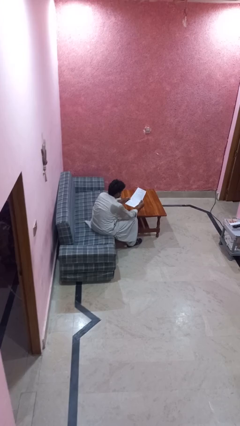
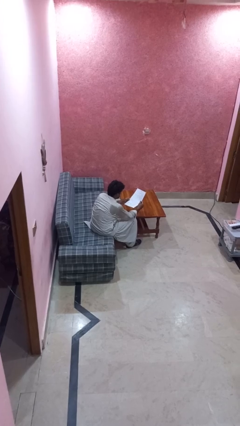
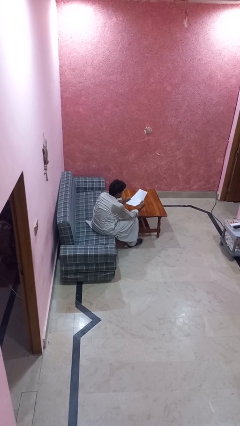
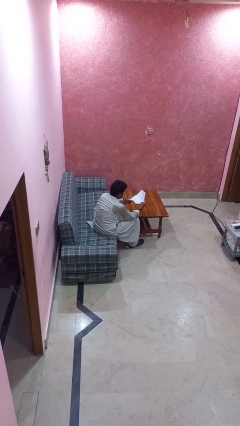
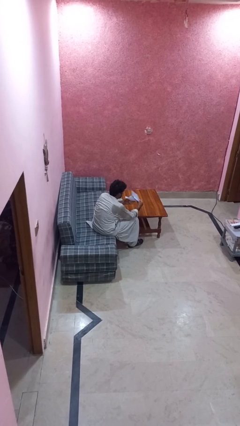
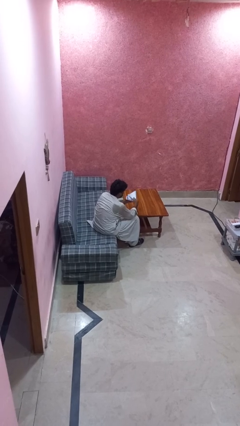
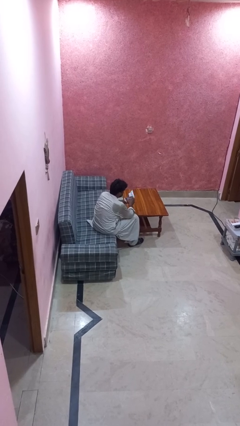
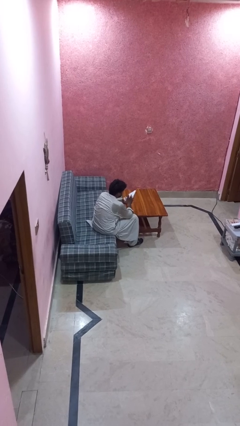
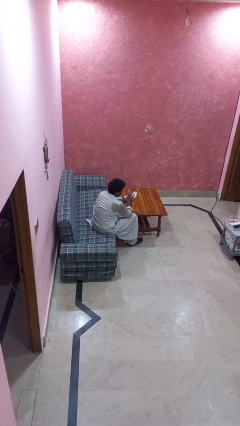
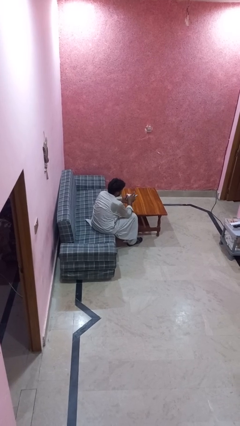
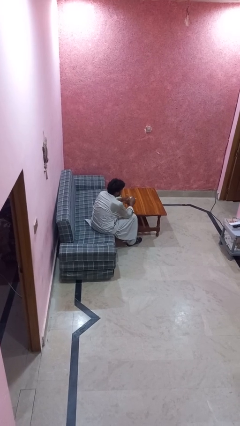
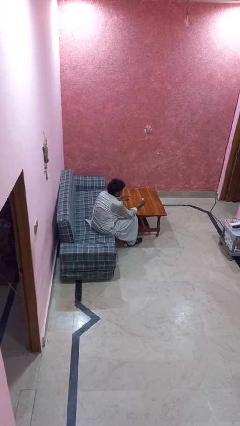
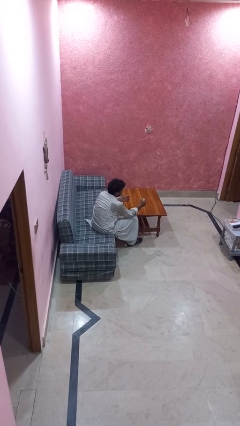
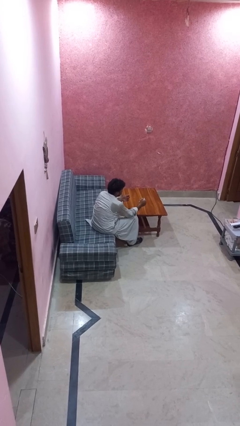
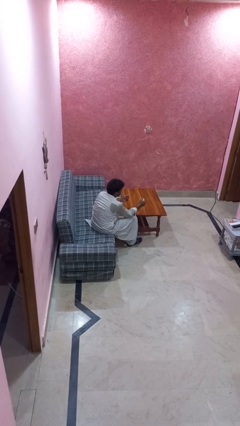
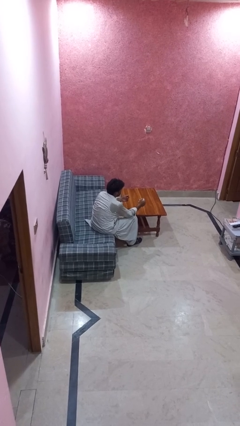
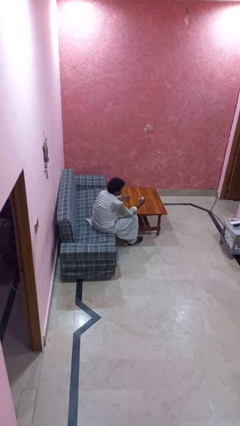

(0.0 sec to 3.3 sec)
person crumples paper

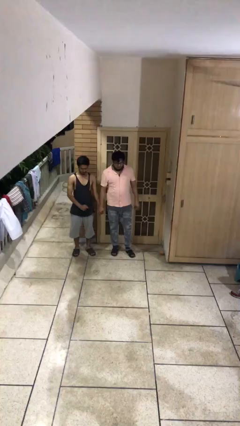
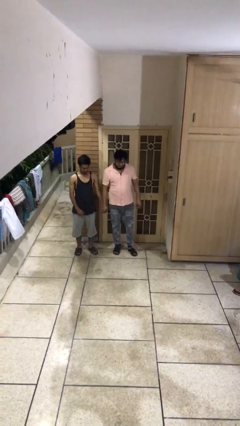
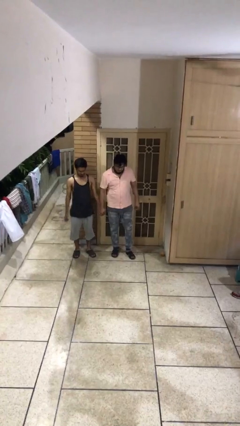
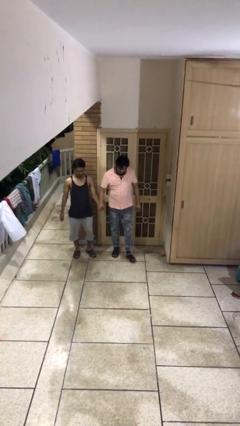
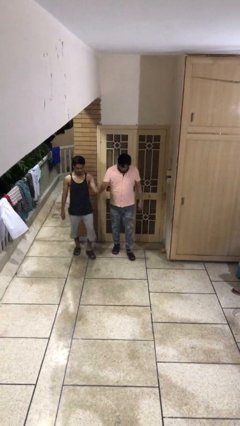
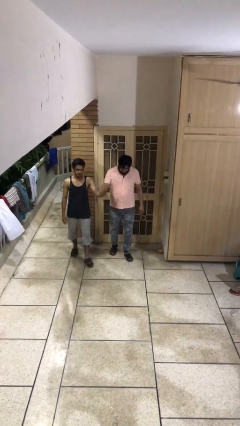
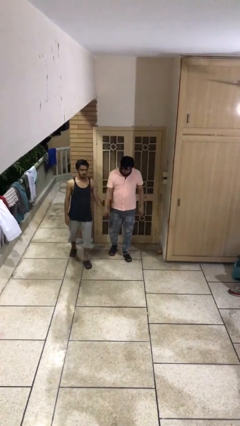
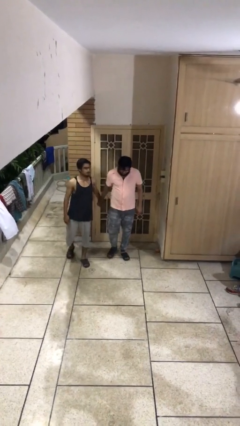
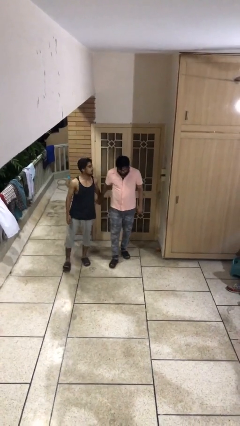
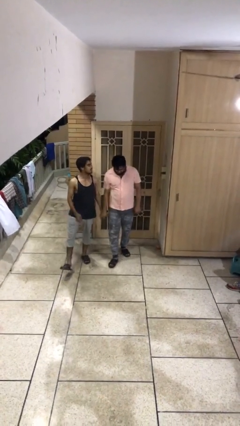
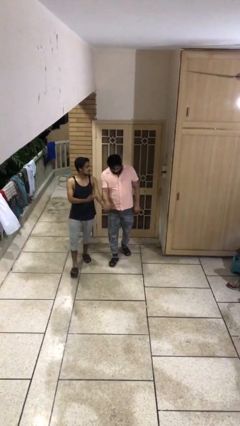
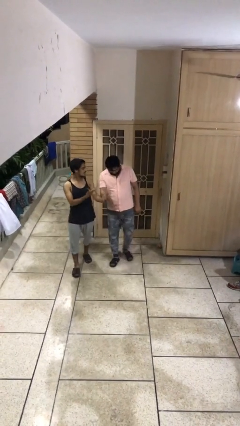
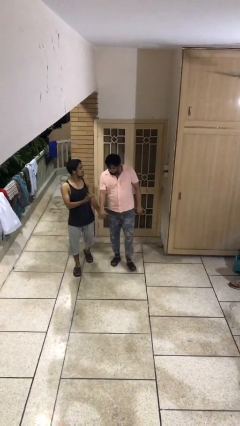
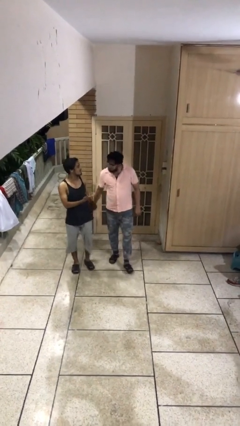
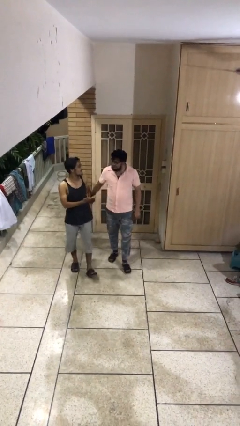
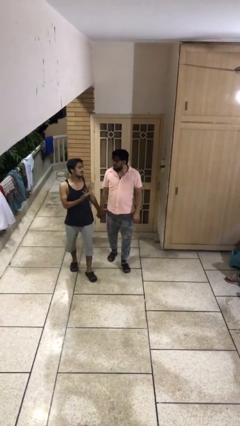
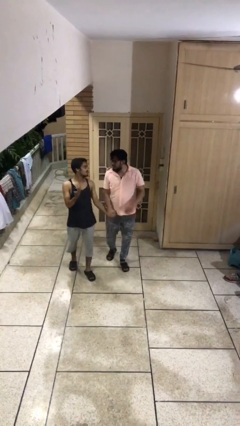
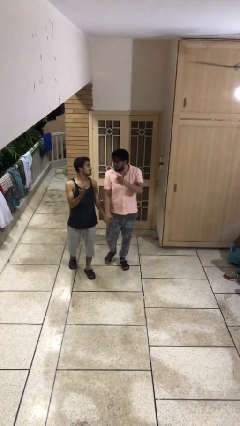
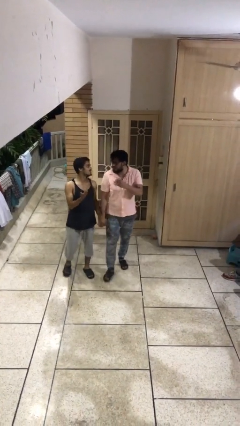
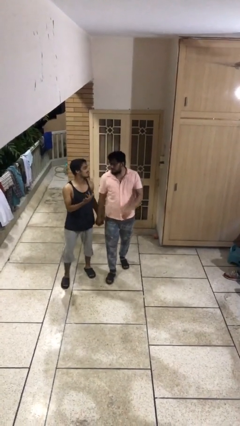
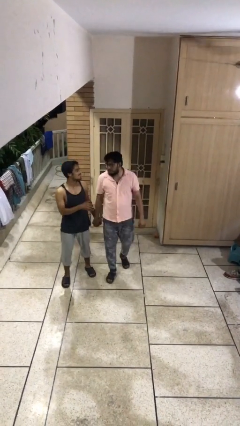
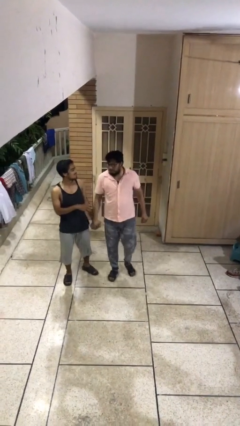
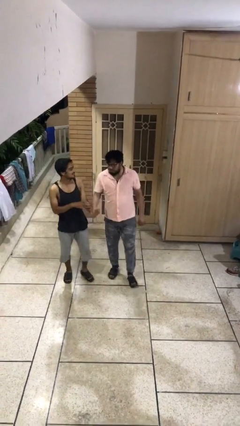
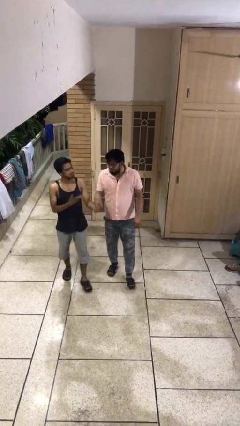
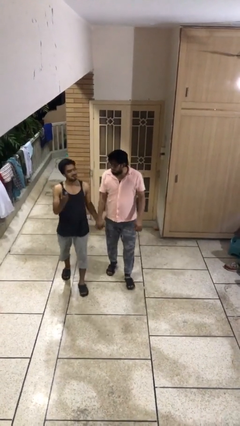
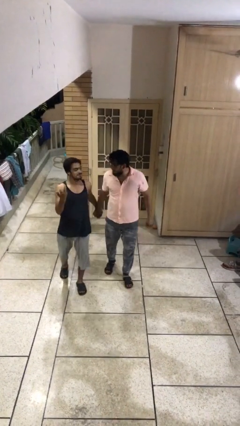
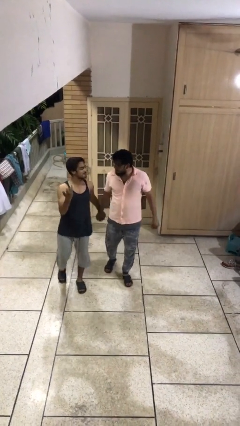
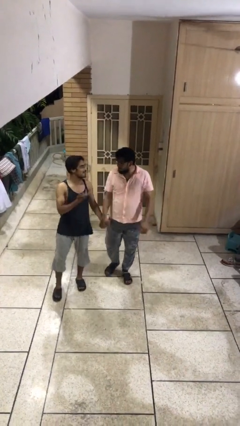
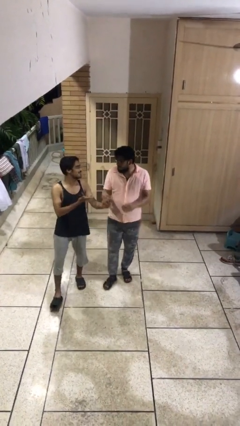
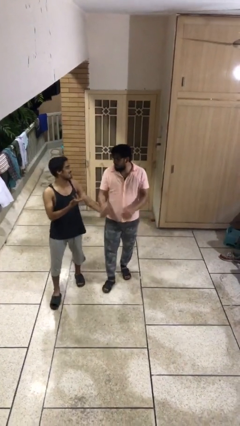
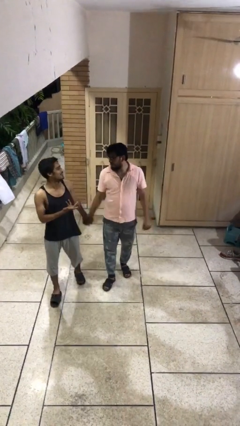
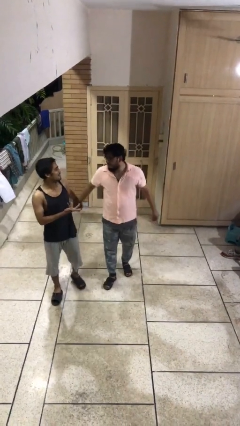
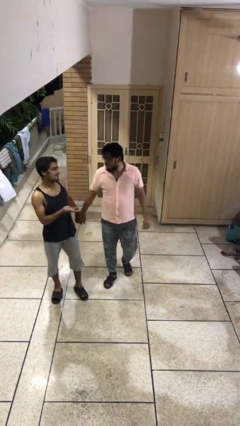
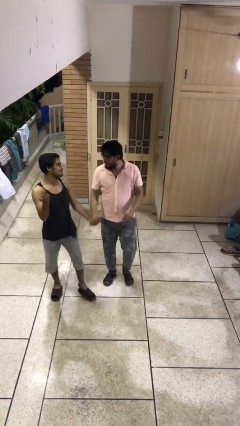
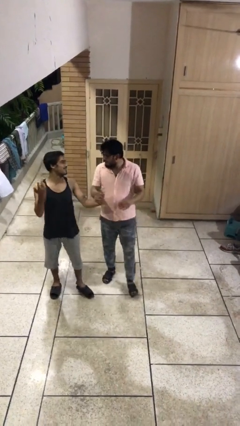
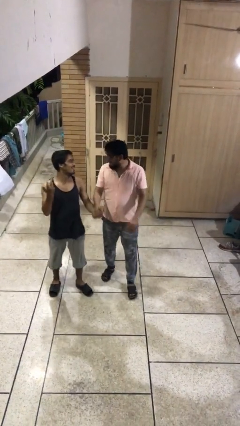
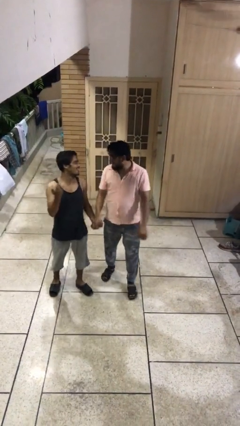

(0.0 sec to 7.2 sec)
person holds hand

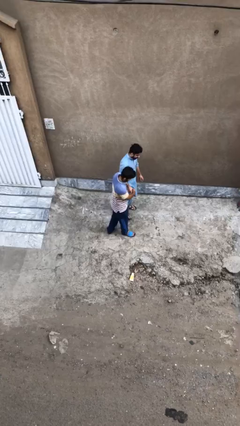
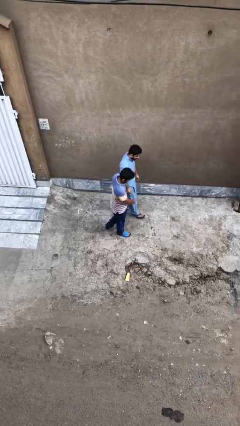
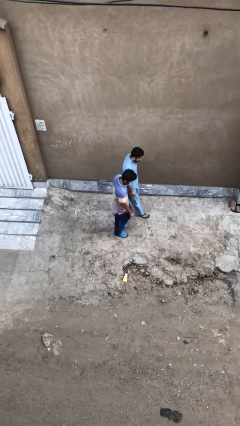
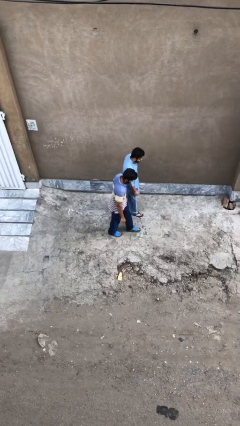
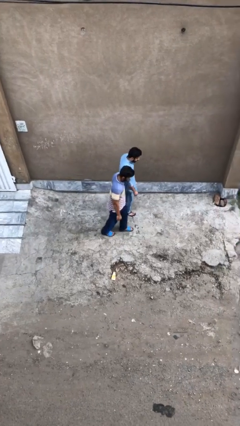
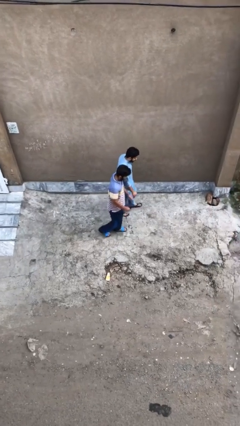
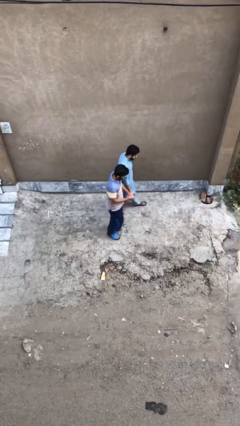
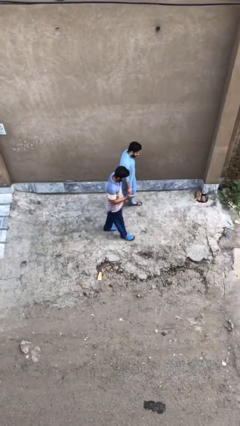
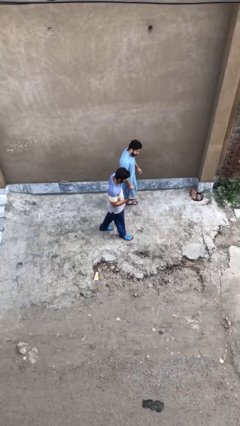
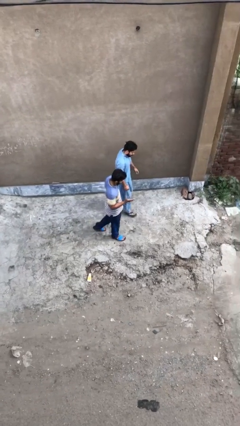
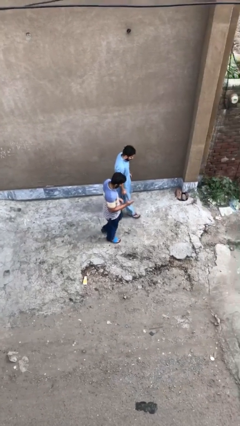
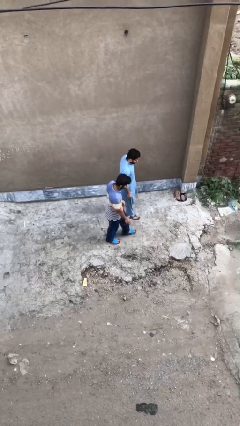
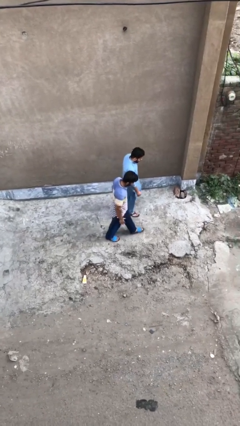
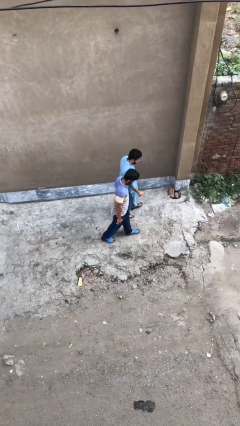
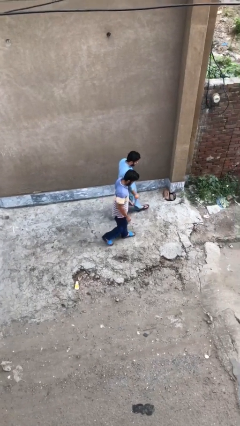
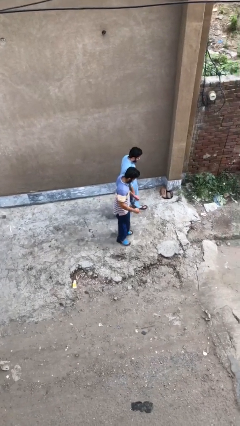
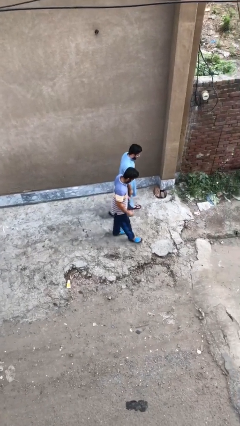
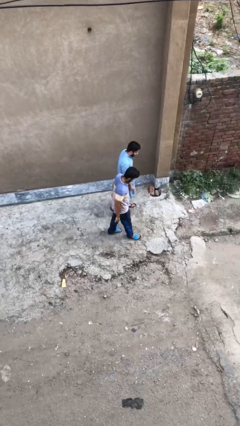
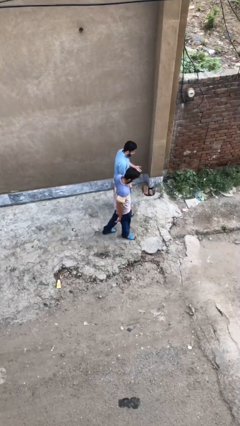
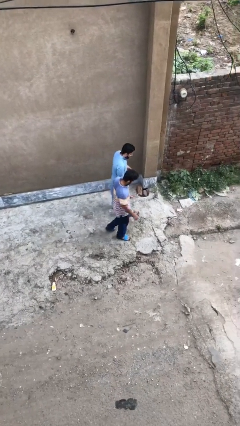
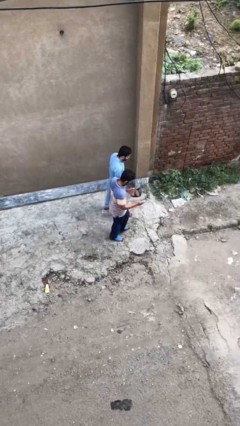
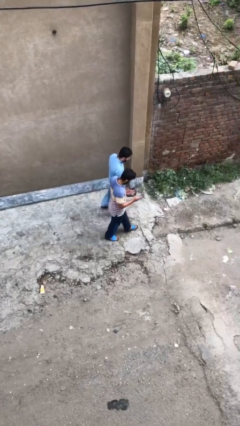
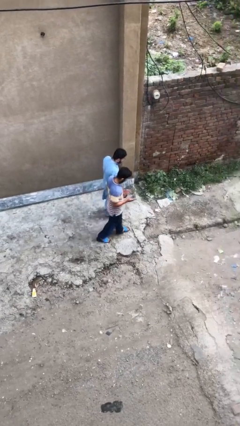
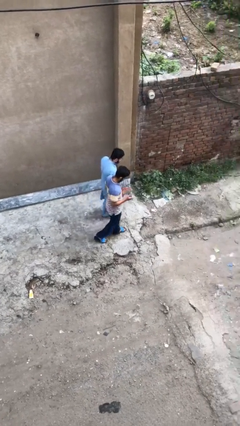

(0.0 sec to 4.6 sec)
person talks to person

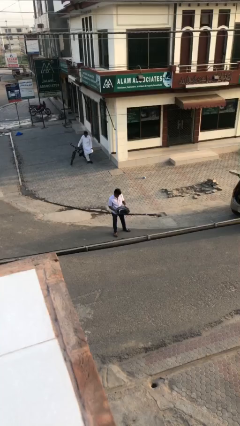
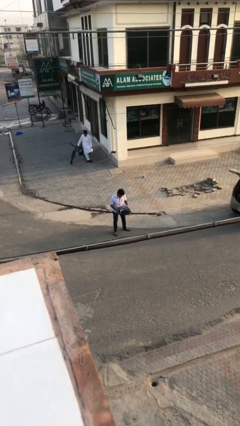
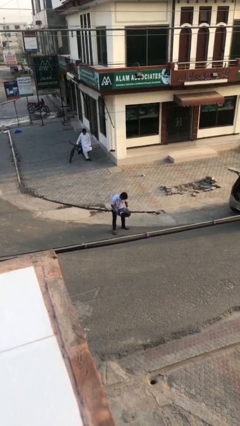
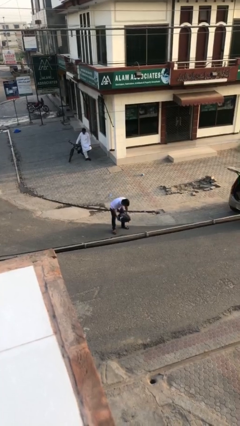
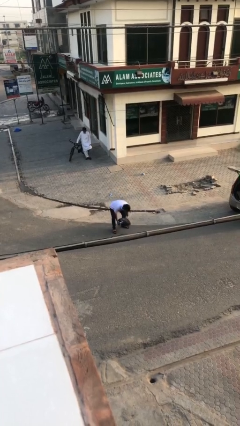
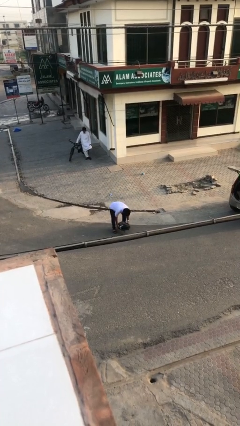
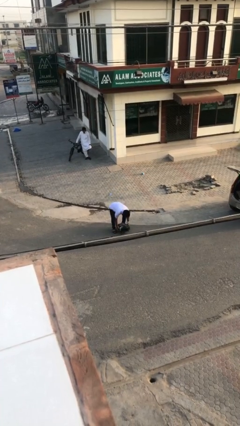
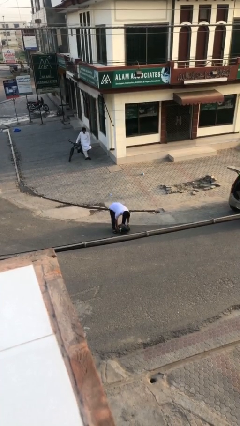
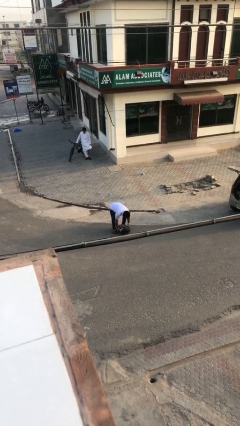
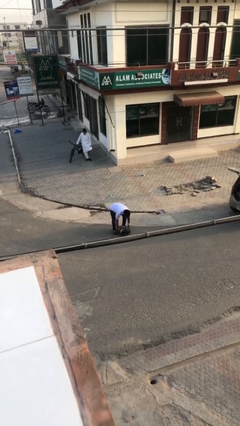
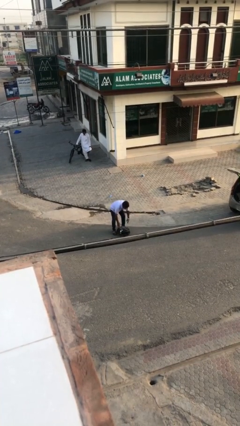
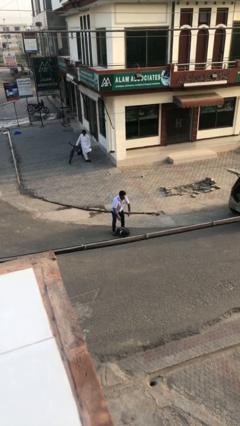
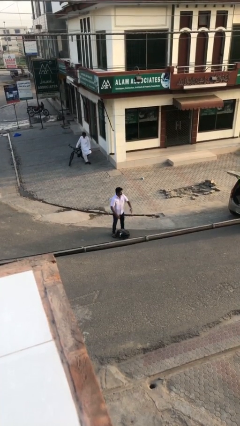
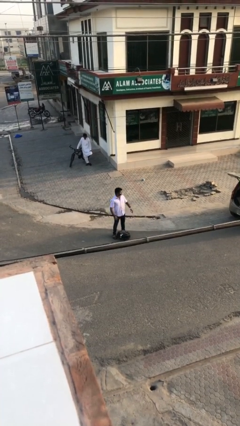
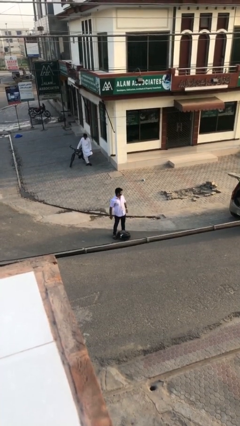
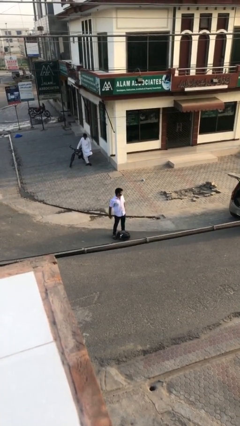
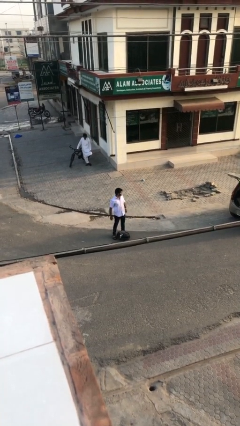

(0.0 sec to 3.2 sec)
person puts down object on floor
